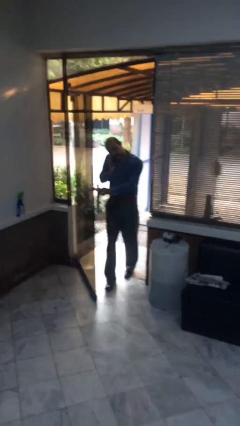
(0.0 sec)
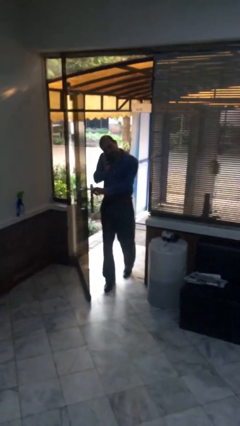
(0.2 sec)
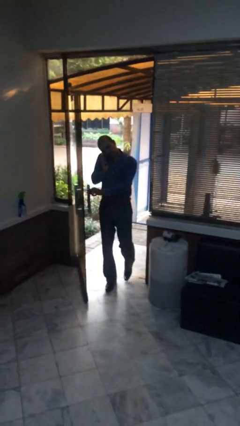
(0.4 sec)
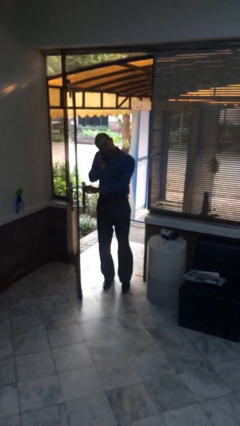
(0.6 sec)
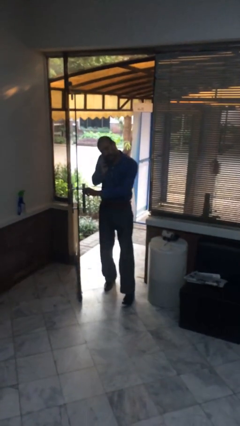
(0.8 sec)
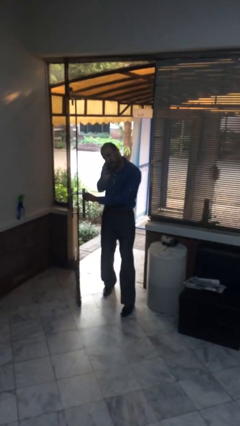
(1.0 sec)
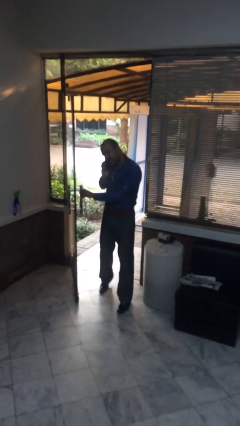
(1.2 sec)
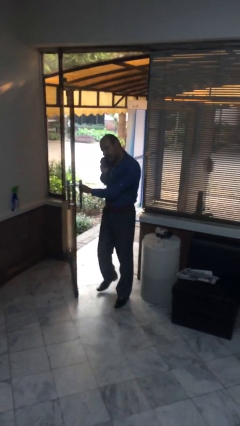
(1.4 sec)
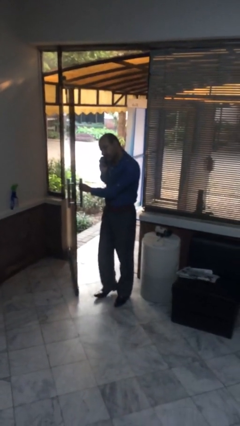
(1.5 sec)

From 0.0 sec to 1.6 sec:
person enters scene through structure

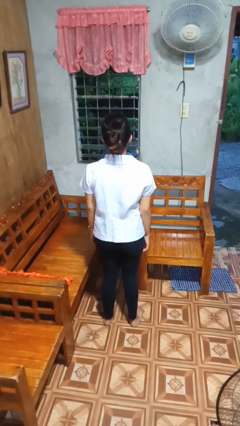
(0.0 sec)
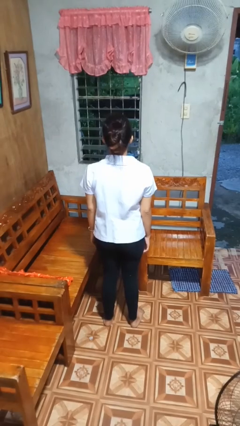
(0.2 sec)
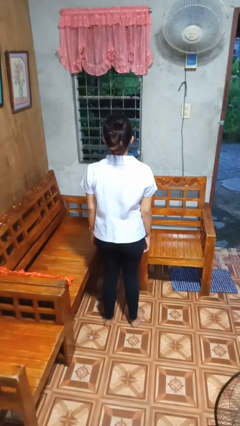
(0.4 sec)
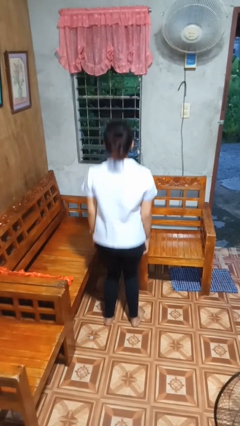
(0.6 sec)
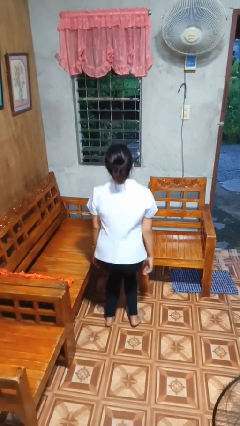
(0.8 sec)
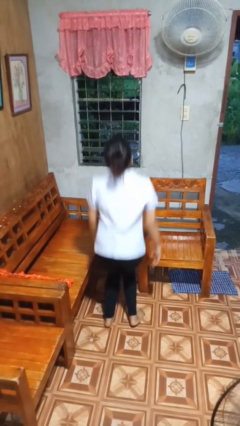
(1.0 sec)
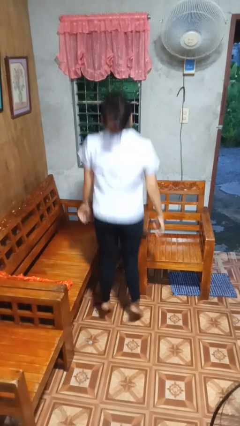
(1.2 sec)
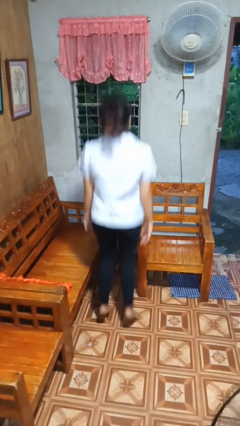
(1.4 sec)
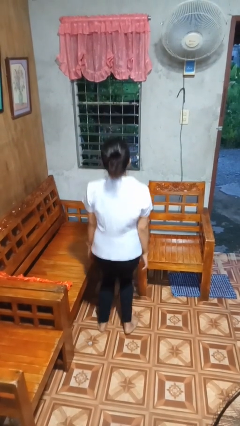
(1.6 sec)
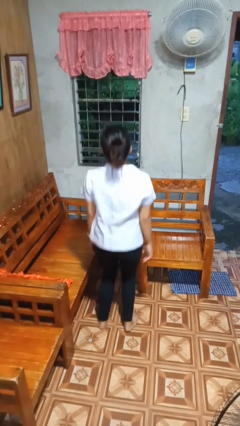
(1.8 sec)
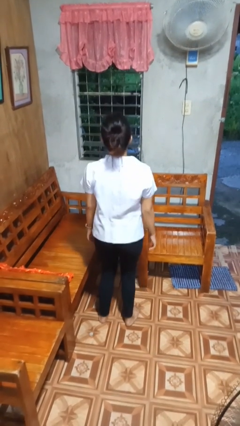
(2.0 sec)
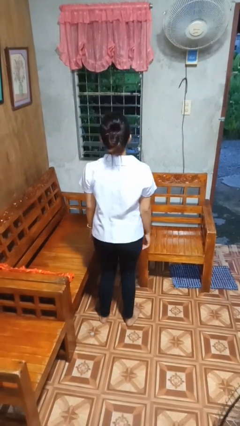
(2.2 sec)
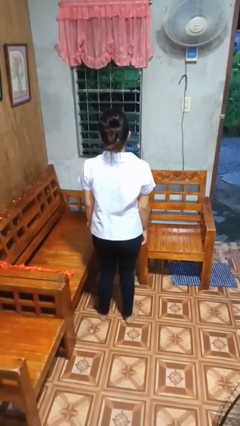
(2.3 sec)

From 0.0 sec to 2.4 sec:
person jumps

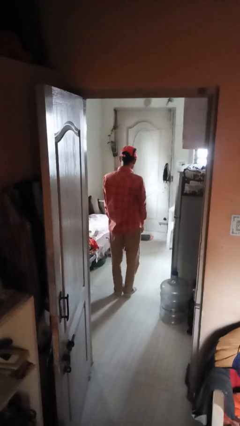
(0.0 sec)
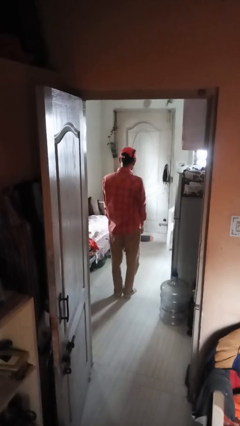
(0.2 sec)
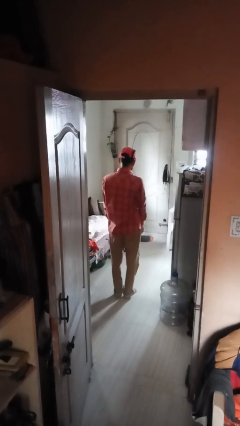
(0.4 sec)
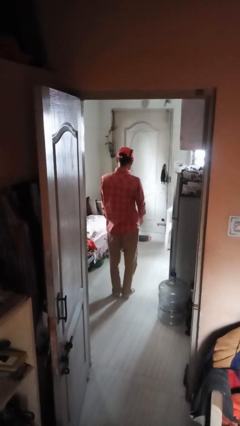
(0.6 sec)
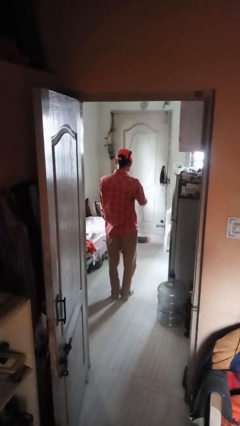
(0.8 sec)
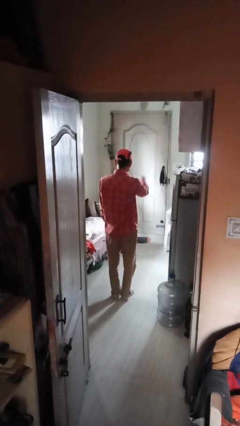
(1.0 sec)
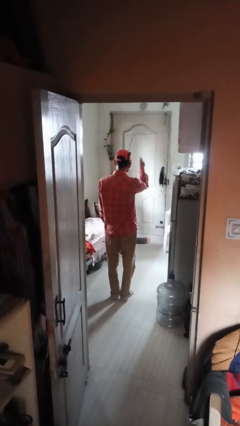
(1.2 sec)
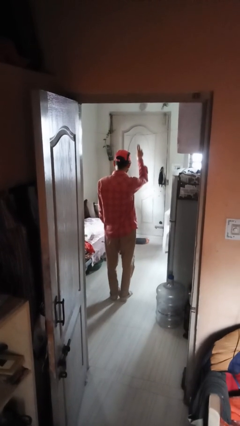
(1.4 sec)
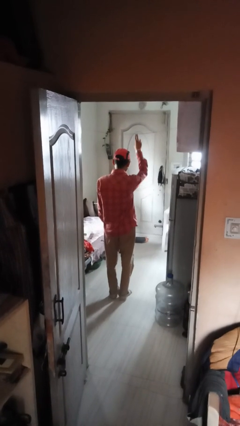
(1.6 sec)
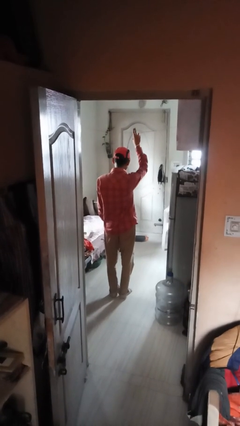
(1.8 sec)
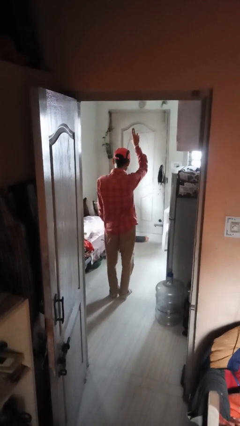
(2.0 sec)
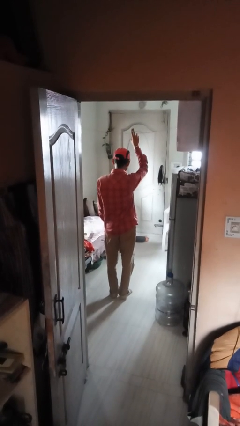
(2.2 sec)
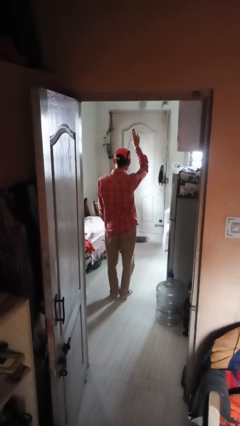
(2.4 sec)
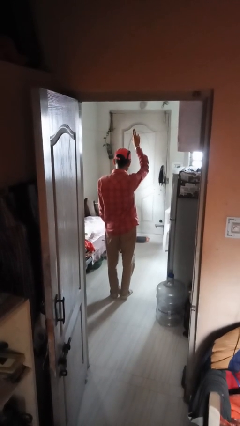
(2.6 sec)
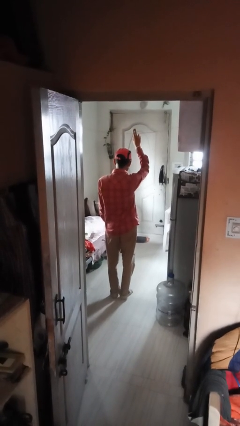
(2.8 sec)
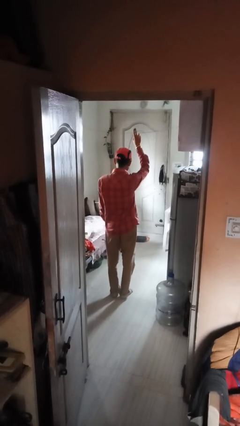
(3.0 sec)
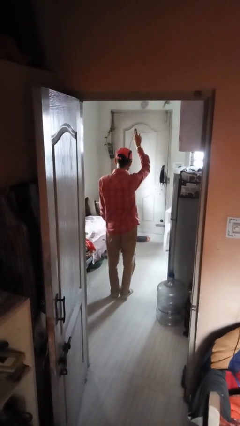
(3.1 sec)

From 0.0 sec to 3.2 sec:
person gestures swipe up

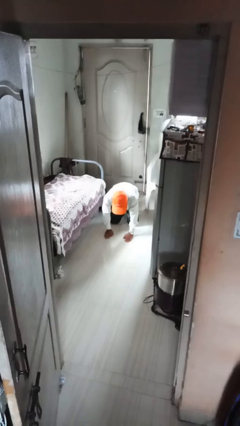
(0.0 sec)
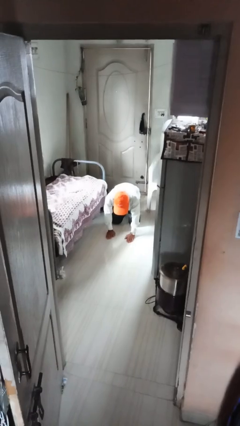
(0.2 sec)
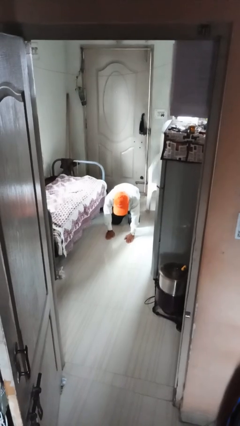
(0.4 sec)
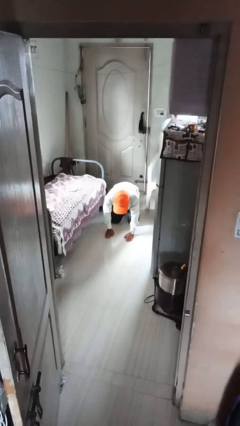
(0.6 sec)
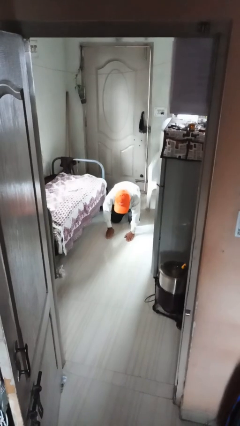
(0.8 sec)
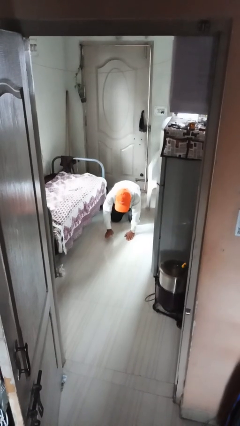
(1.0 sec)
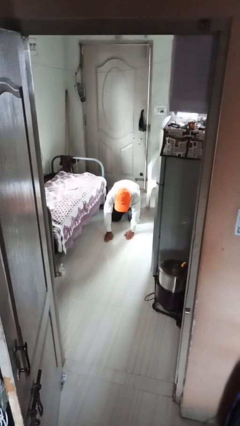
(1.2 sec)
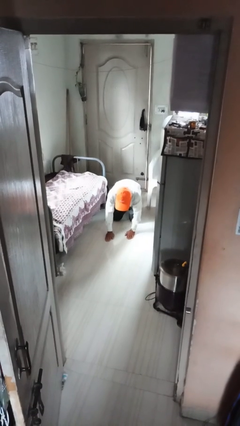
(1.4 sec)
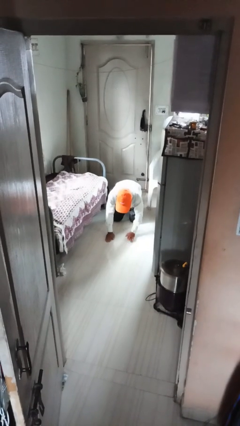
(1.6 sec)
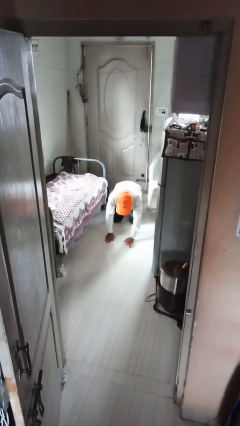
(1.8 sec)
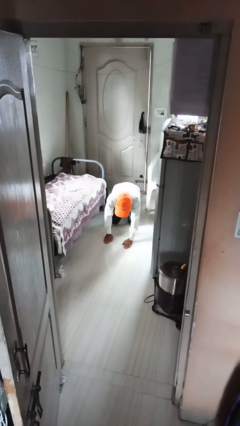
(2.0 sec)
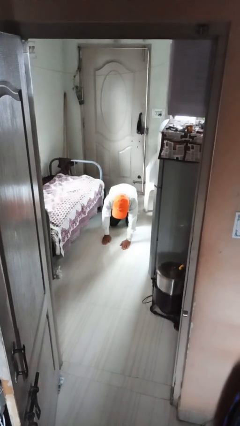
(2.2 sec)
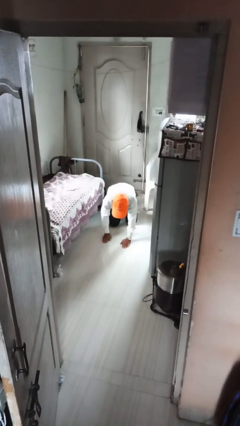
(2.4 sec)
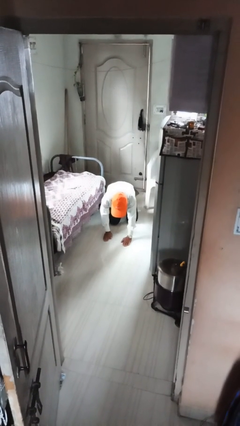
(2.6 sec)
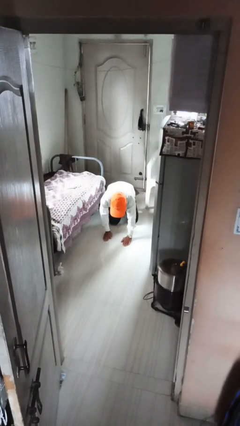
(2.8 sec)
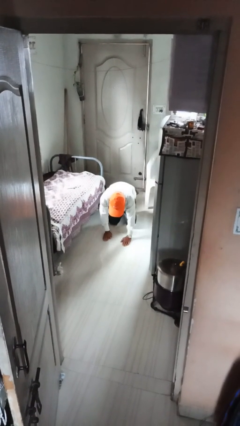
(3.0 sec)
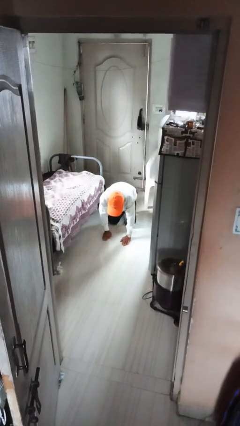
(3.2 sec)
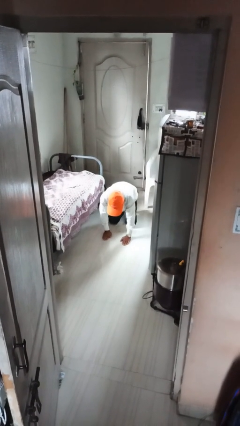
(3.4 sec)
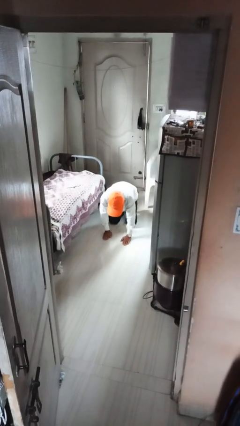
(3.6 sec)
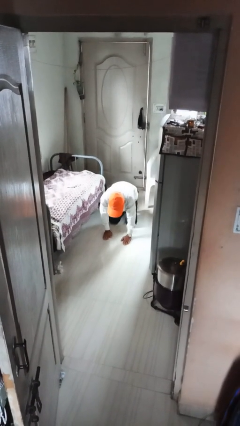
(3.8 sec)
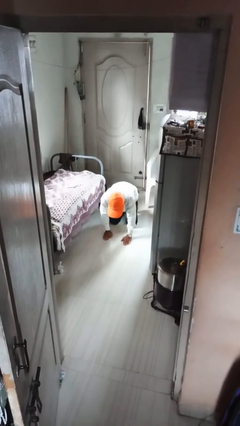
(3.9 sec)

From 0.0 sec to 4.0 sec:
person crawls

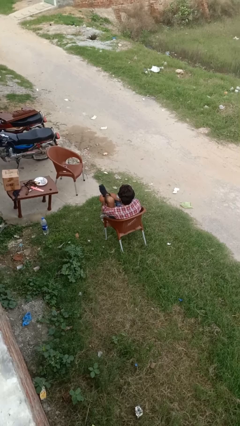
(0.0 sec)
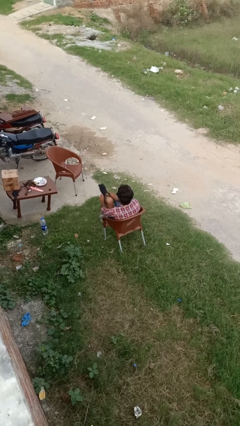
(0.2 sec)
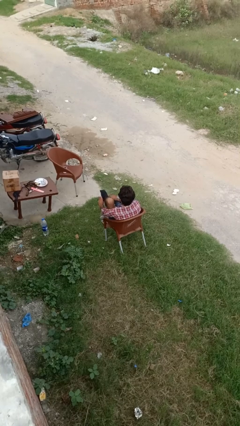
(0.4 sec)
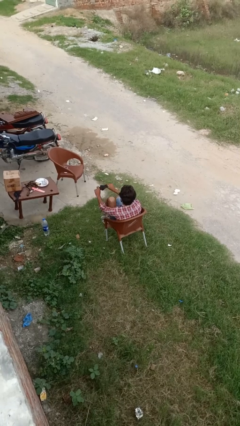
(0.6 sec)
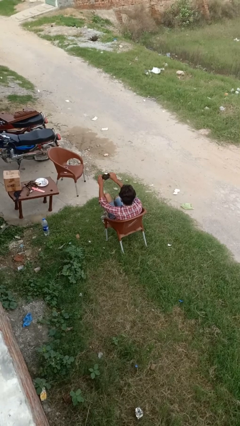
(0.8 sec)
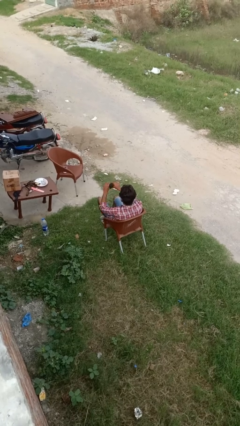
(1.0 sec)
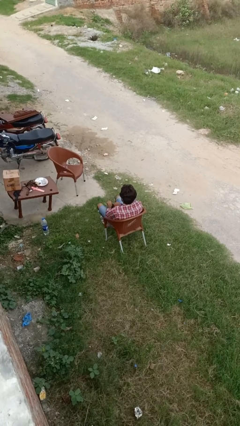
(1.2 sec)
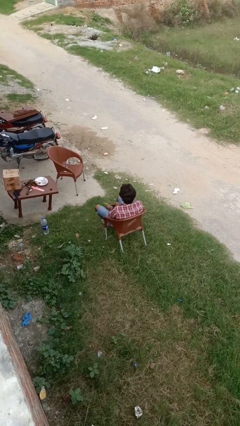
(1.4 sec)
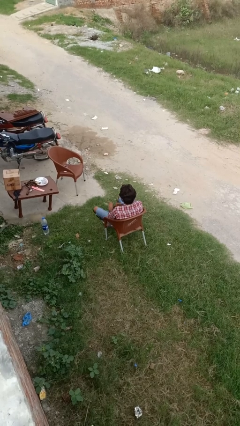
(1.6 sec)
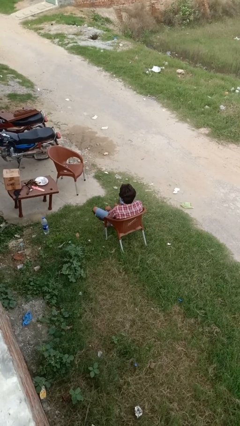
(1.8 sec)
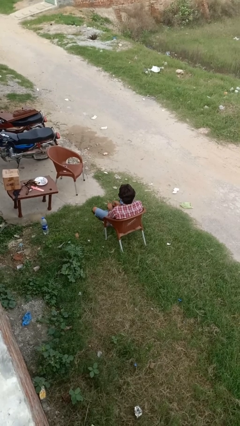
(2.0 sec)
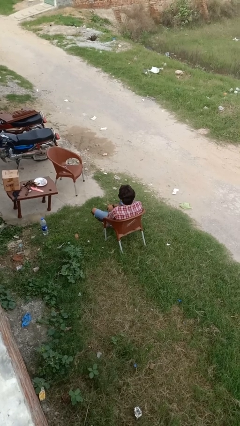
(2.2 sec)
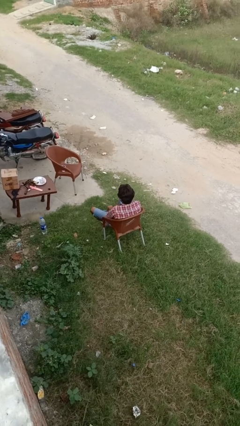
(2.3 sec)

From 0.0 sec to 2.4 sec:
person takes off socks

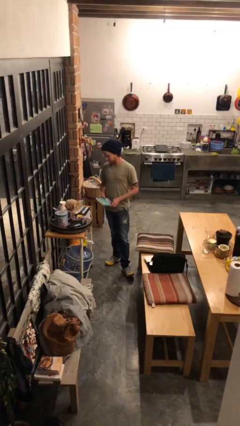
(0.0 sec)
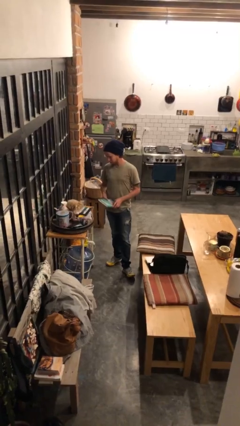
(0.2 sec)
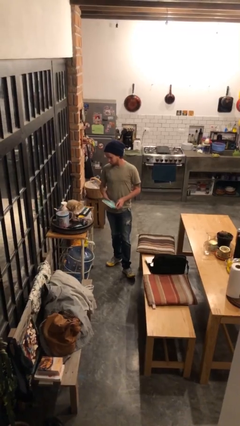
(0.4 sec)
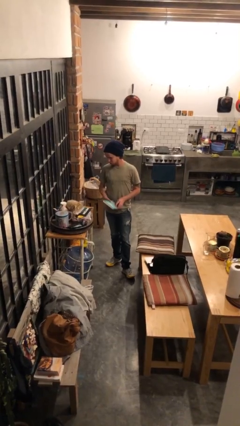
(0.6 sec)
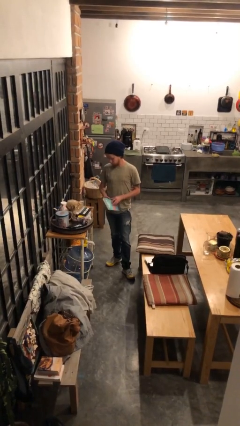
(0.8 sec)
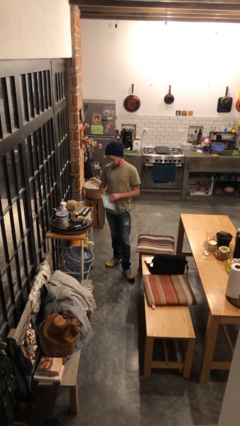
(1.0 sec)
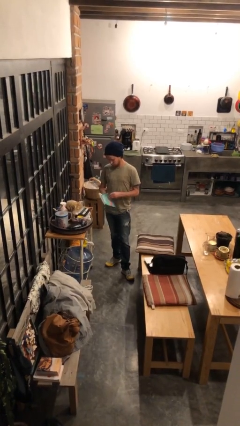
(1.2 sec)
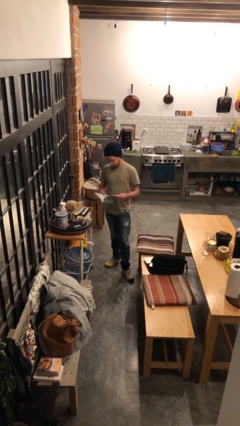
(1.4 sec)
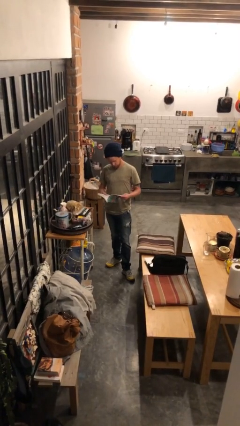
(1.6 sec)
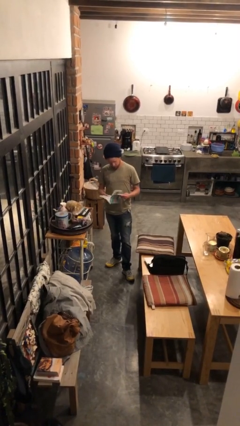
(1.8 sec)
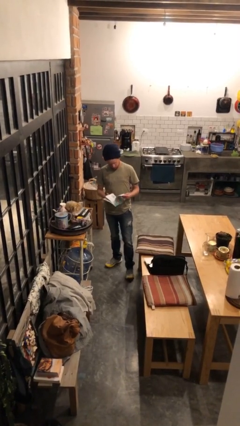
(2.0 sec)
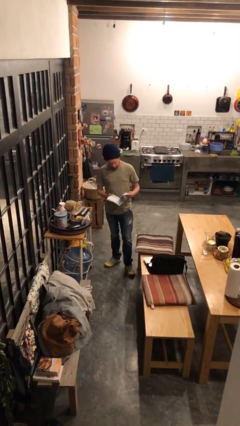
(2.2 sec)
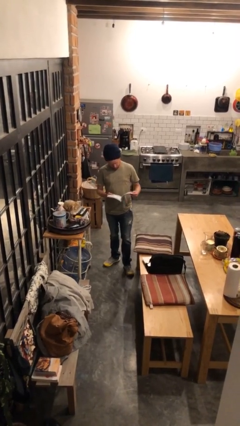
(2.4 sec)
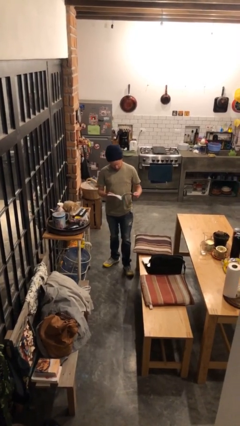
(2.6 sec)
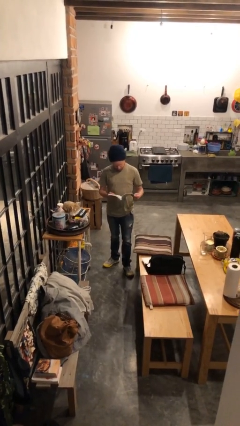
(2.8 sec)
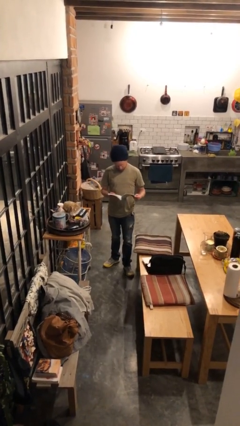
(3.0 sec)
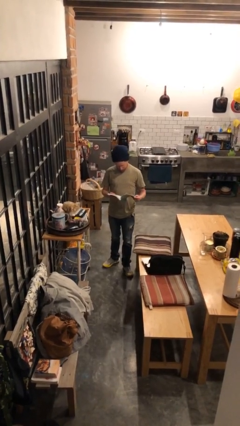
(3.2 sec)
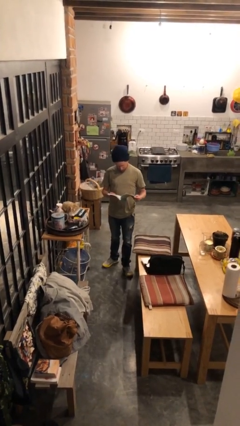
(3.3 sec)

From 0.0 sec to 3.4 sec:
person reads document

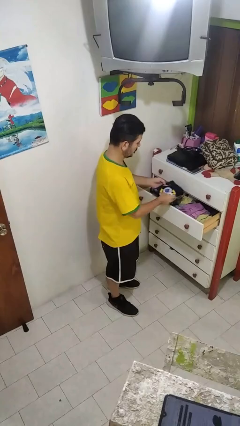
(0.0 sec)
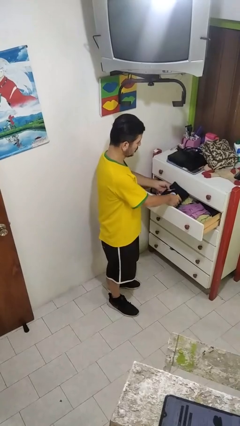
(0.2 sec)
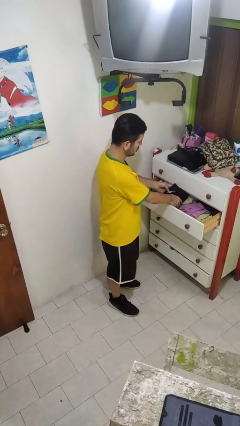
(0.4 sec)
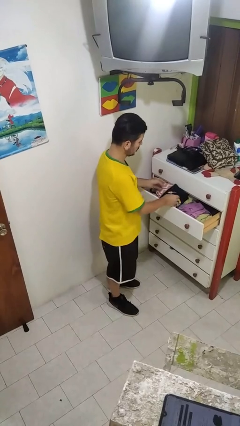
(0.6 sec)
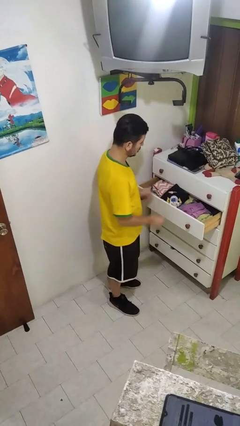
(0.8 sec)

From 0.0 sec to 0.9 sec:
person puts clothes into dresser
